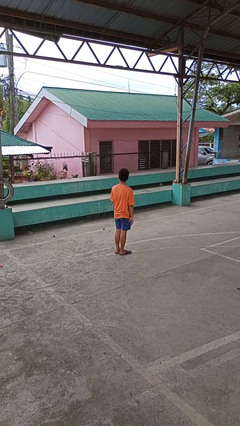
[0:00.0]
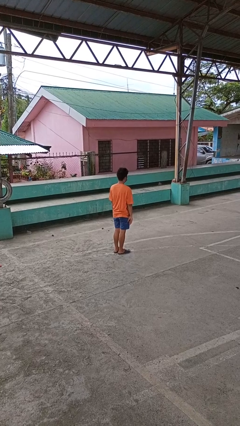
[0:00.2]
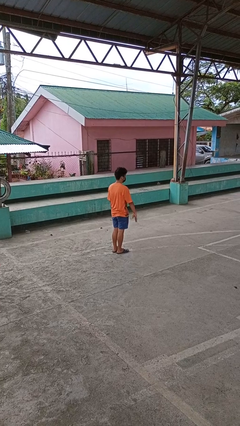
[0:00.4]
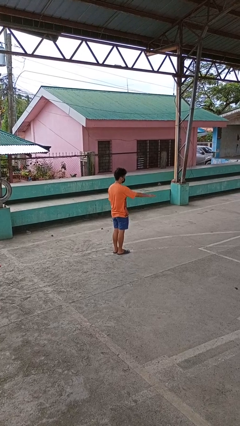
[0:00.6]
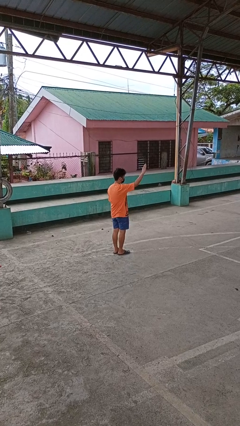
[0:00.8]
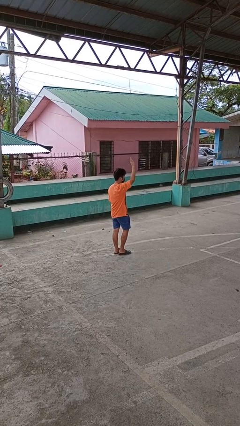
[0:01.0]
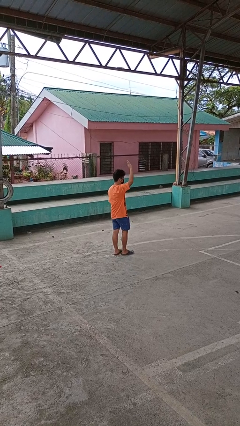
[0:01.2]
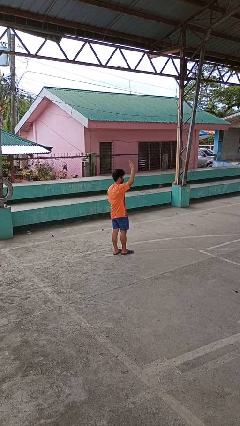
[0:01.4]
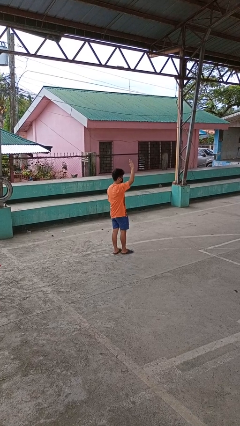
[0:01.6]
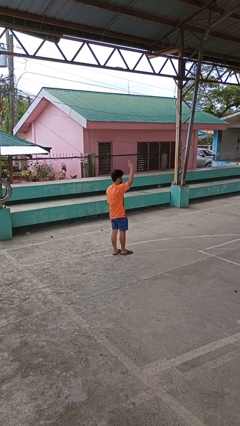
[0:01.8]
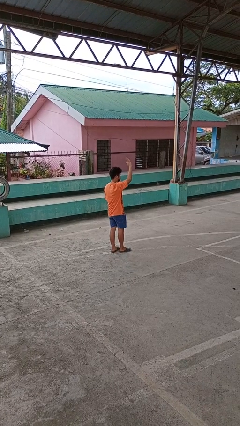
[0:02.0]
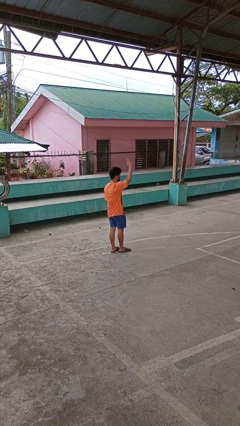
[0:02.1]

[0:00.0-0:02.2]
person gestures raise hand

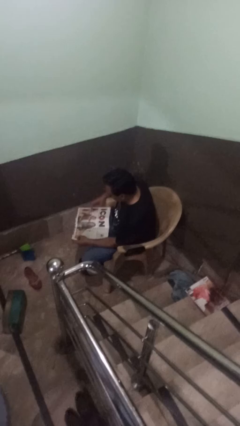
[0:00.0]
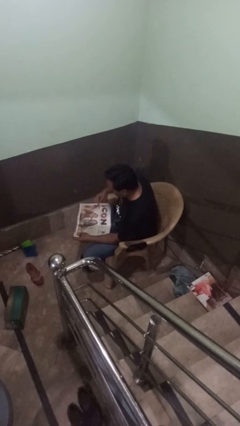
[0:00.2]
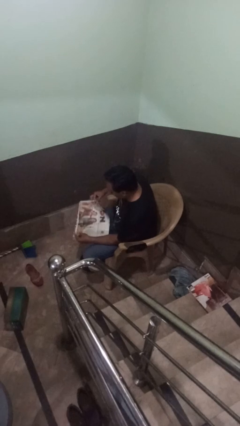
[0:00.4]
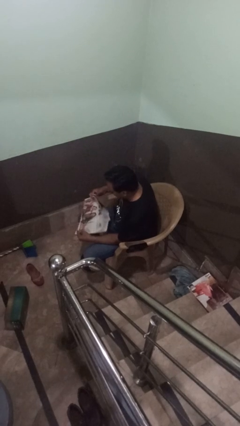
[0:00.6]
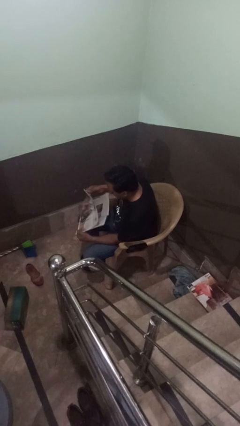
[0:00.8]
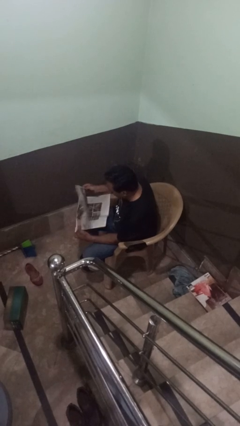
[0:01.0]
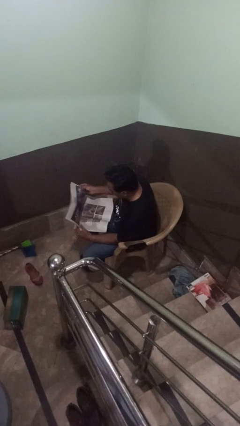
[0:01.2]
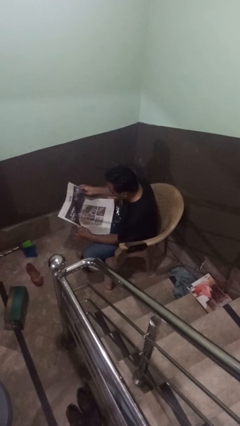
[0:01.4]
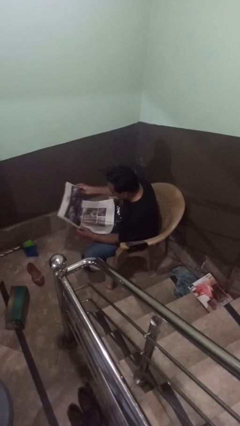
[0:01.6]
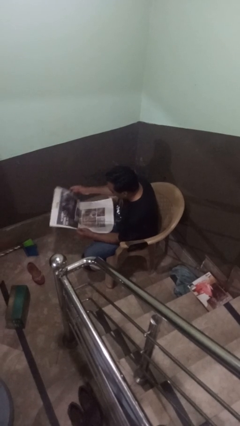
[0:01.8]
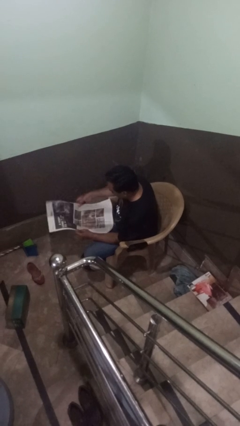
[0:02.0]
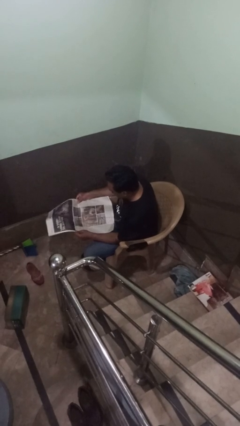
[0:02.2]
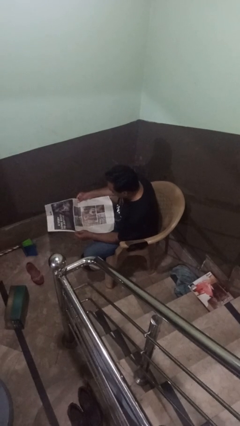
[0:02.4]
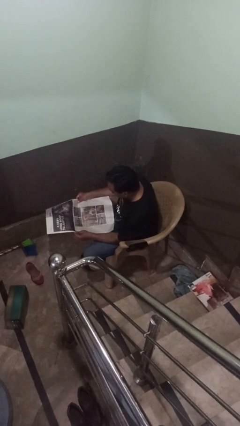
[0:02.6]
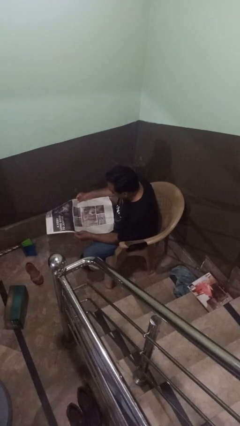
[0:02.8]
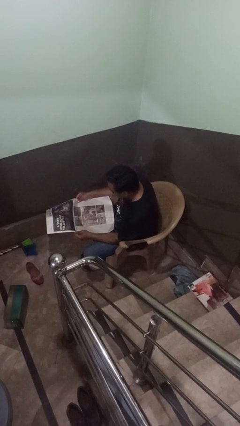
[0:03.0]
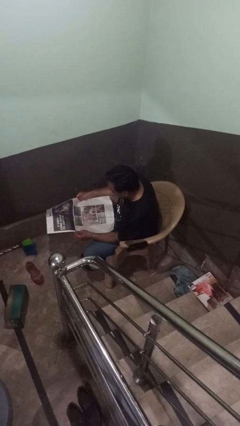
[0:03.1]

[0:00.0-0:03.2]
person reads newspaper

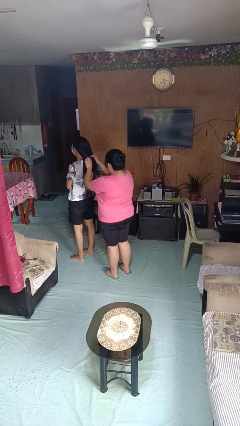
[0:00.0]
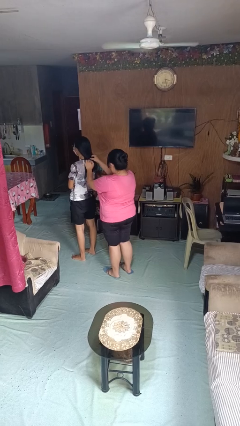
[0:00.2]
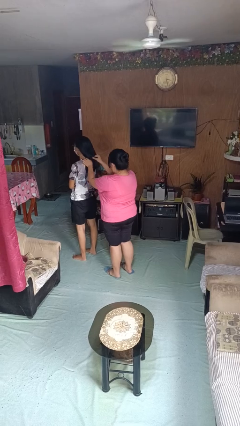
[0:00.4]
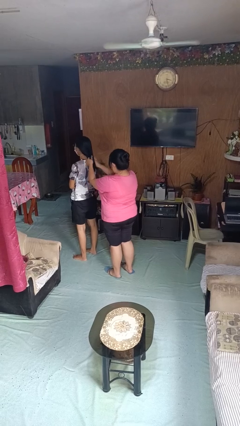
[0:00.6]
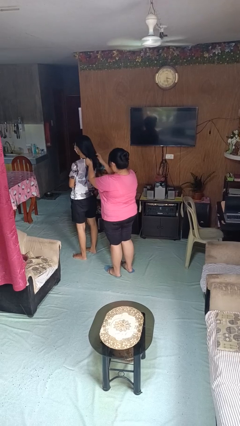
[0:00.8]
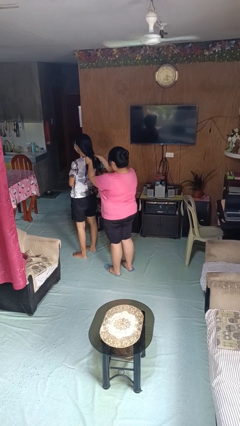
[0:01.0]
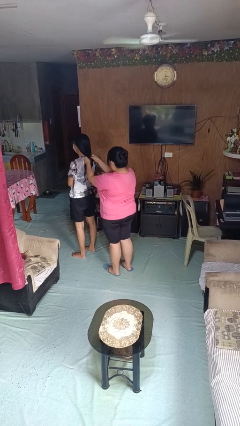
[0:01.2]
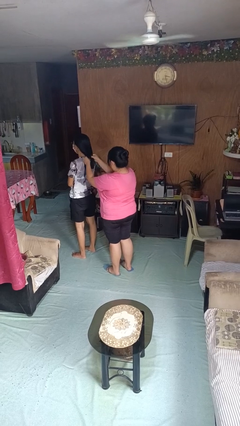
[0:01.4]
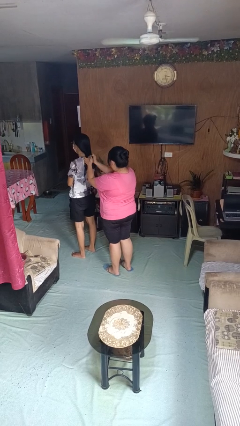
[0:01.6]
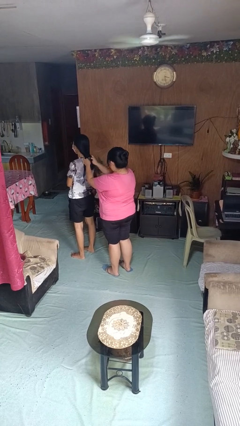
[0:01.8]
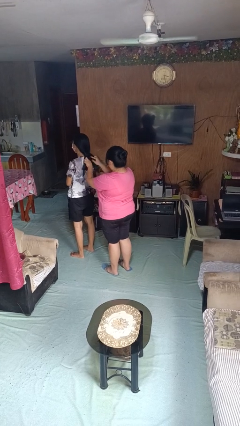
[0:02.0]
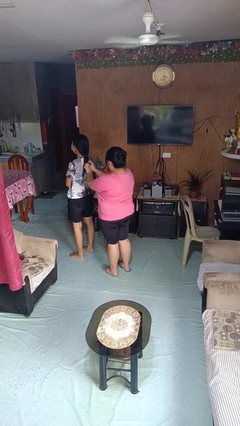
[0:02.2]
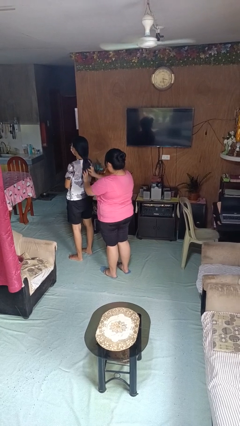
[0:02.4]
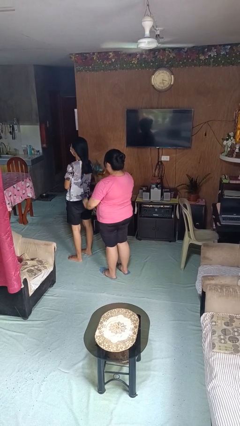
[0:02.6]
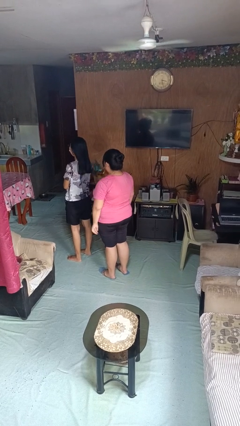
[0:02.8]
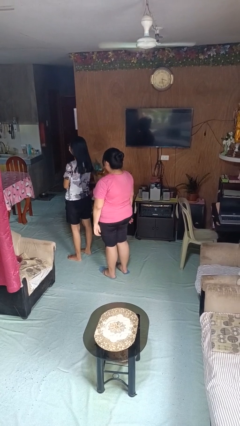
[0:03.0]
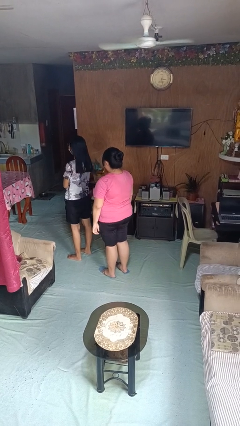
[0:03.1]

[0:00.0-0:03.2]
person braids hair of person

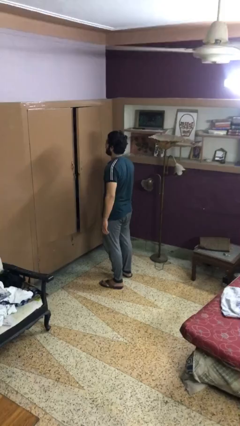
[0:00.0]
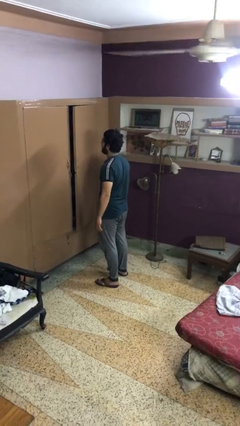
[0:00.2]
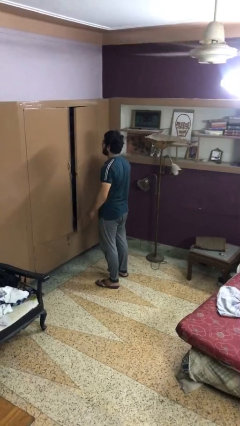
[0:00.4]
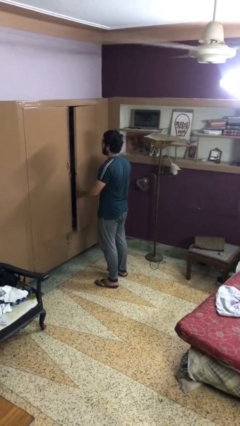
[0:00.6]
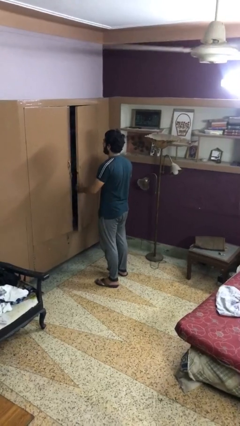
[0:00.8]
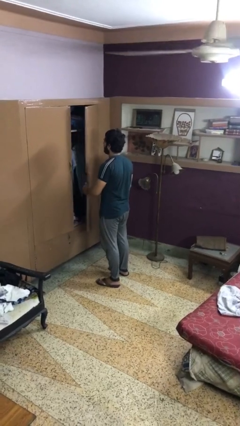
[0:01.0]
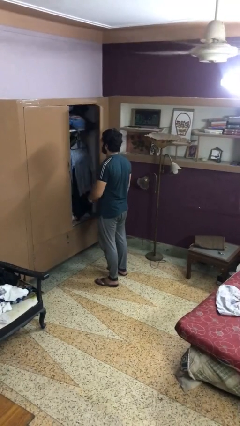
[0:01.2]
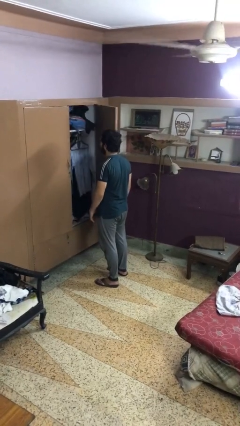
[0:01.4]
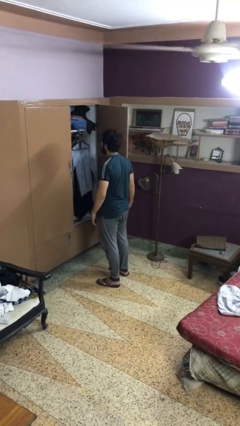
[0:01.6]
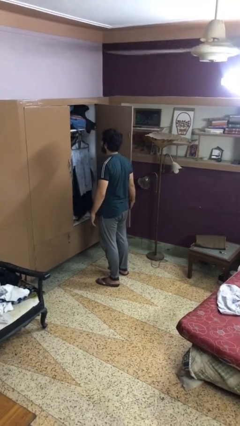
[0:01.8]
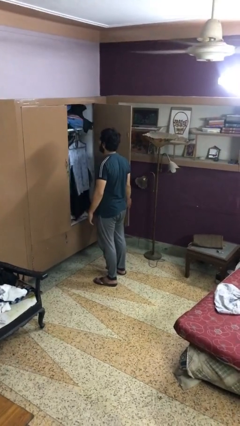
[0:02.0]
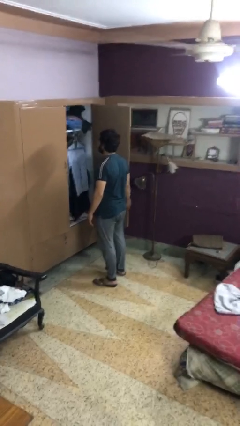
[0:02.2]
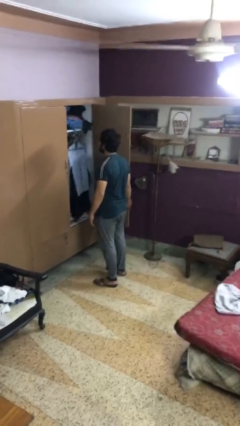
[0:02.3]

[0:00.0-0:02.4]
person opens closet door

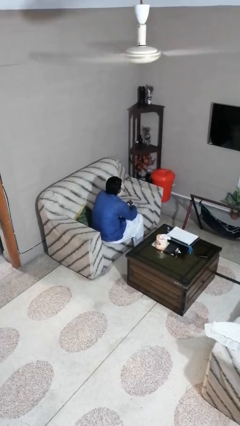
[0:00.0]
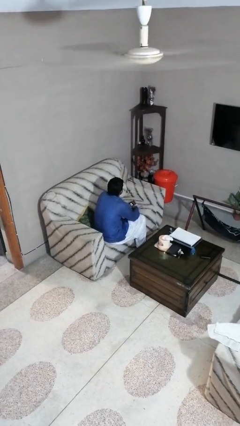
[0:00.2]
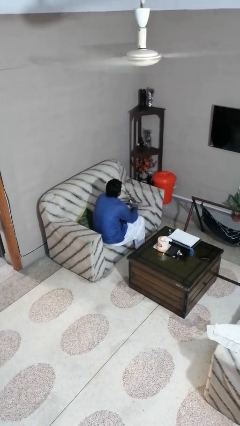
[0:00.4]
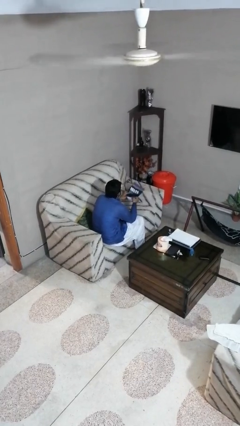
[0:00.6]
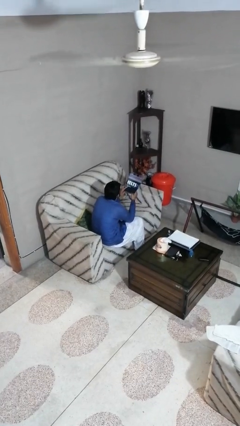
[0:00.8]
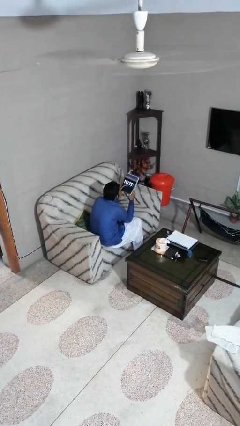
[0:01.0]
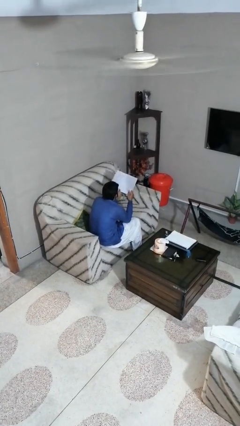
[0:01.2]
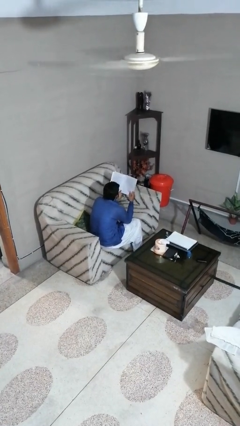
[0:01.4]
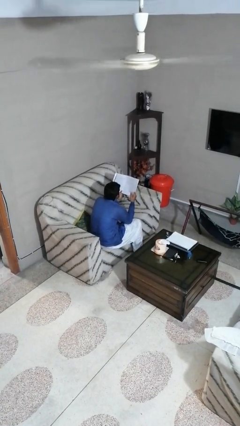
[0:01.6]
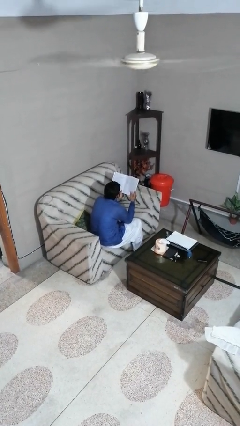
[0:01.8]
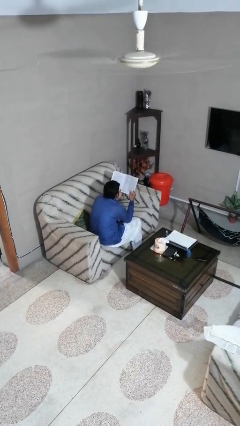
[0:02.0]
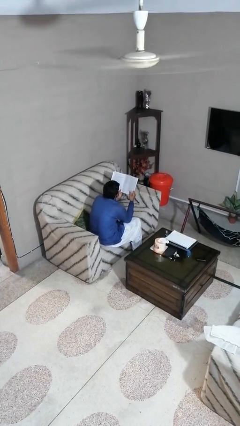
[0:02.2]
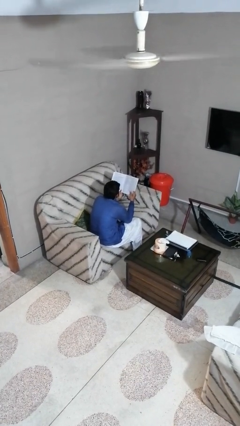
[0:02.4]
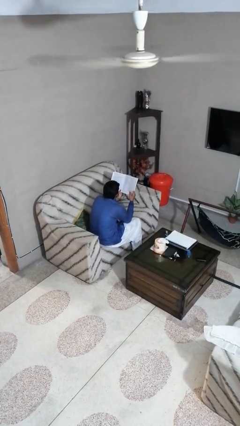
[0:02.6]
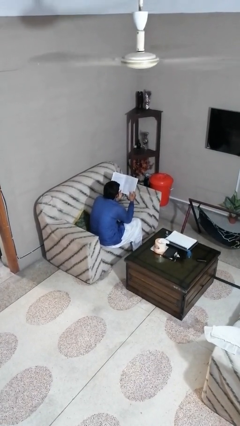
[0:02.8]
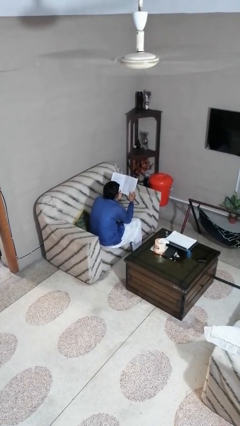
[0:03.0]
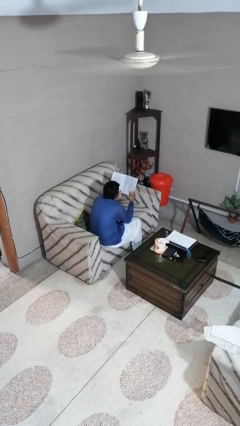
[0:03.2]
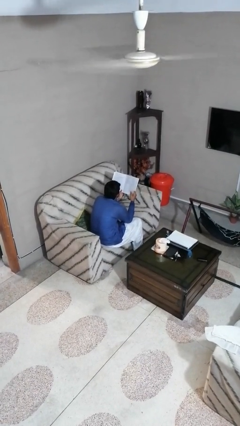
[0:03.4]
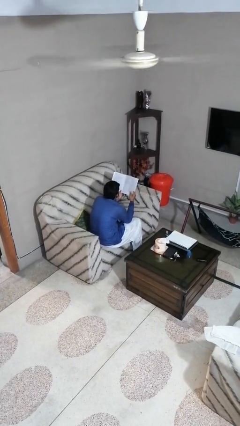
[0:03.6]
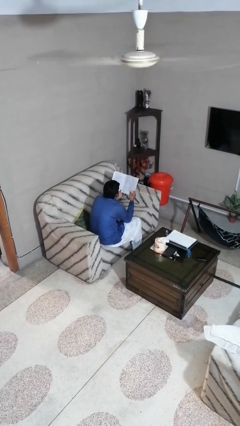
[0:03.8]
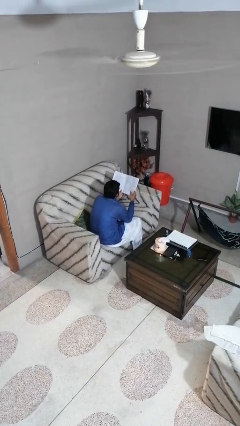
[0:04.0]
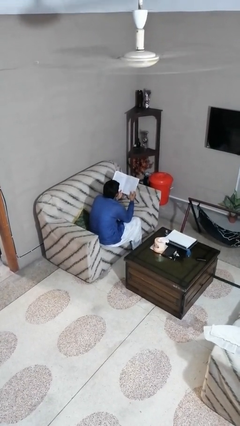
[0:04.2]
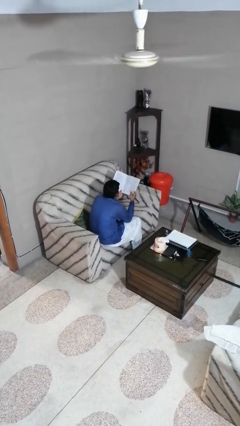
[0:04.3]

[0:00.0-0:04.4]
person reads book

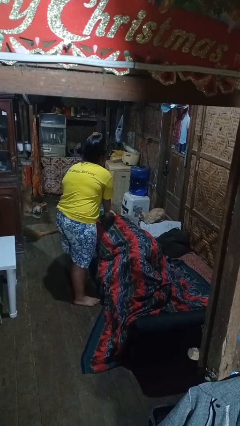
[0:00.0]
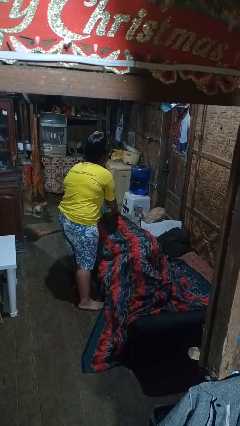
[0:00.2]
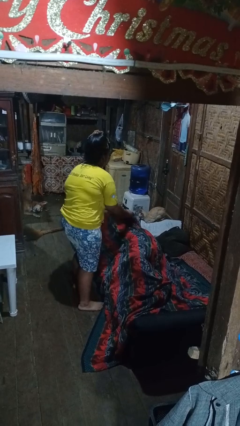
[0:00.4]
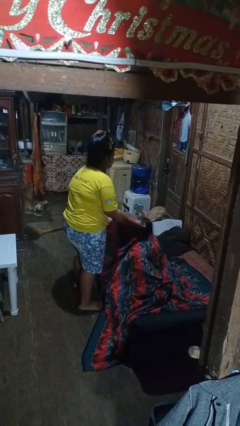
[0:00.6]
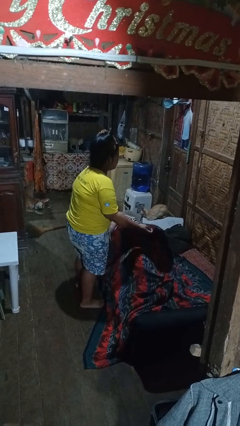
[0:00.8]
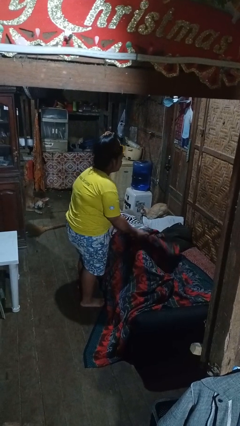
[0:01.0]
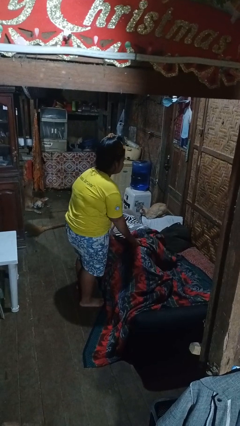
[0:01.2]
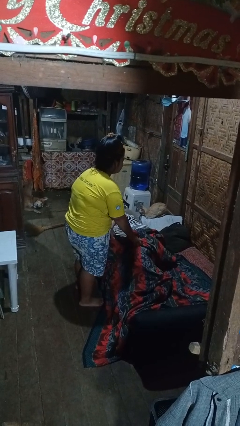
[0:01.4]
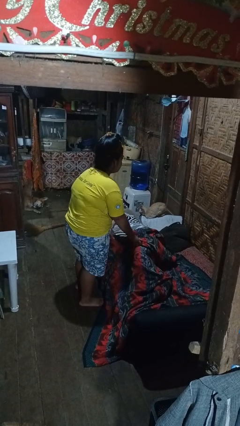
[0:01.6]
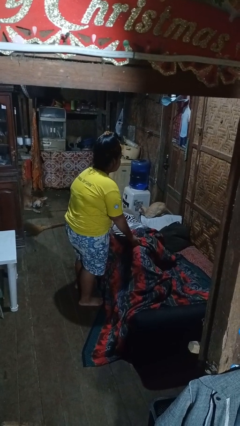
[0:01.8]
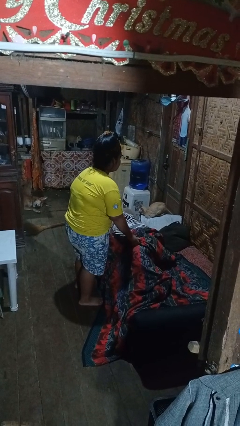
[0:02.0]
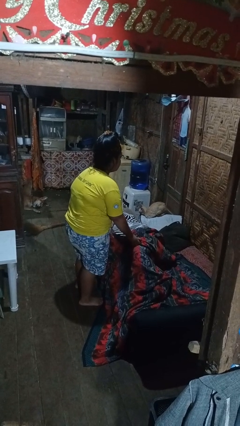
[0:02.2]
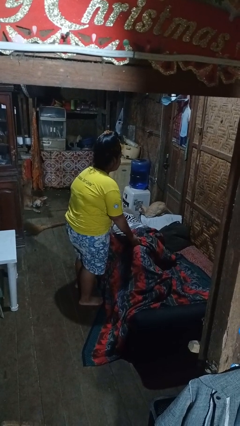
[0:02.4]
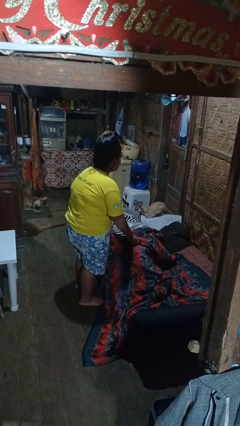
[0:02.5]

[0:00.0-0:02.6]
person uncovers friend with blanket

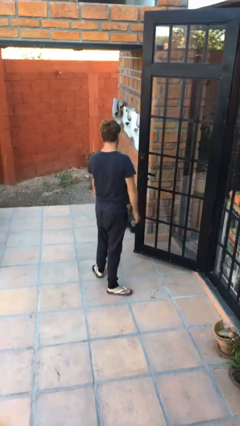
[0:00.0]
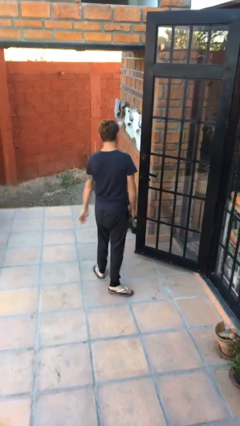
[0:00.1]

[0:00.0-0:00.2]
person closes door with hip
